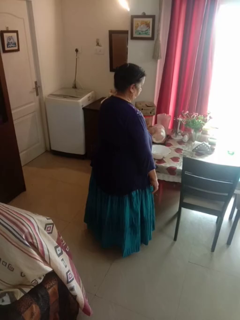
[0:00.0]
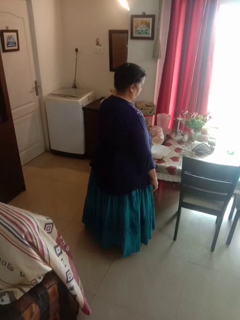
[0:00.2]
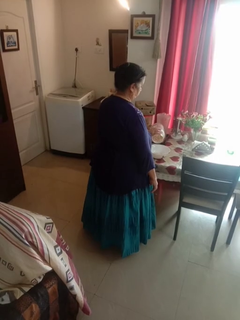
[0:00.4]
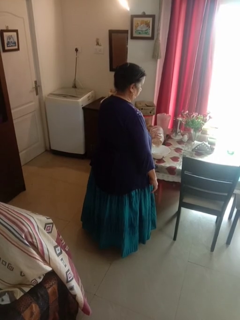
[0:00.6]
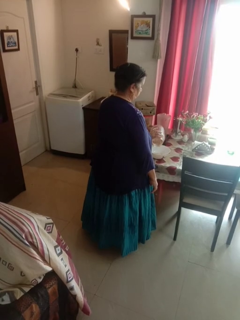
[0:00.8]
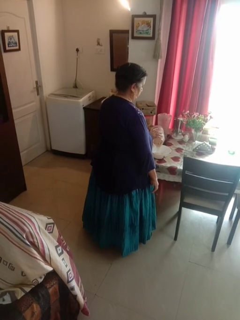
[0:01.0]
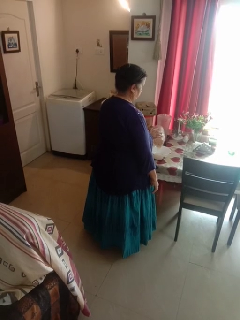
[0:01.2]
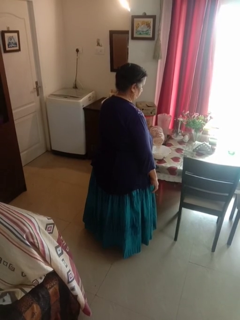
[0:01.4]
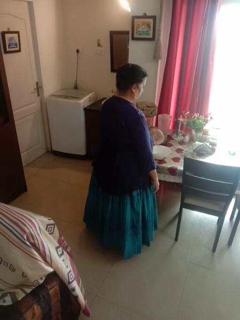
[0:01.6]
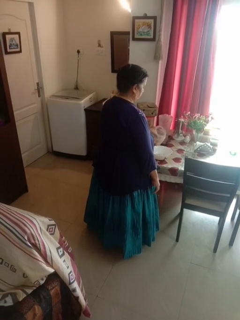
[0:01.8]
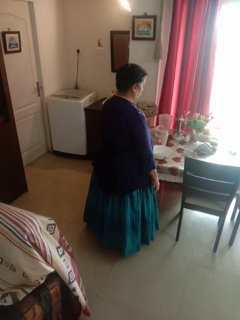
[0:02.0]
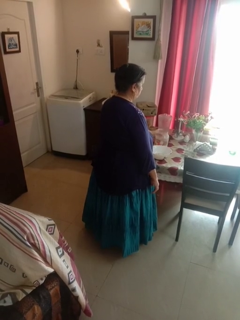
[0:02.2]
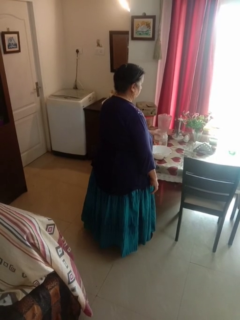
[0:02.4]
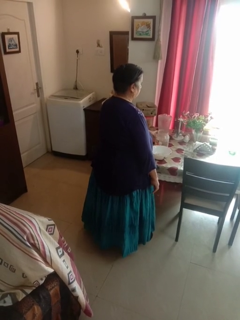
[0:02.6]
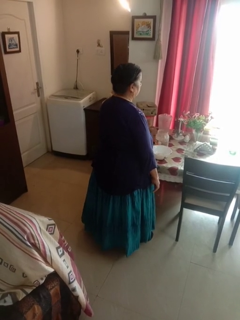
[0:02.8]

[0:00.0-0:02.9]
person pours into bowl

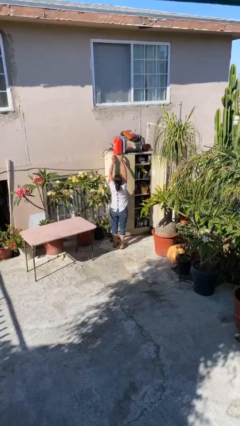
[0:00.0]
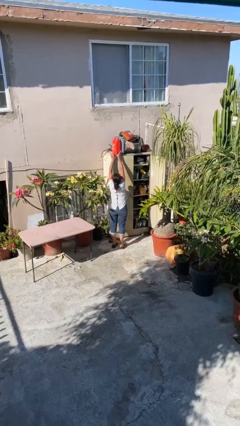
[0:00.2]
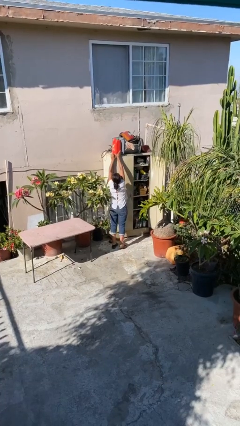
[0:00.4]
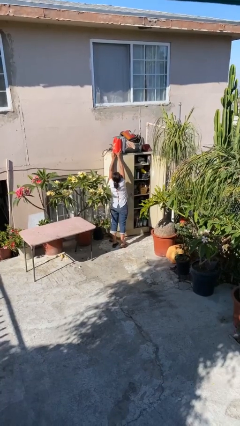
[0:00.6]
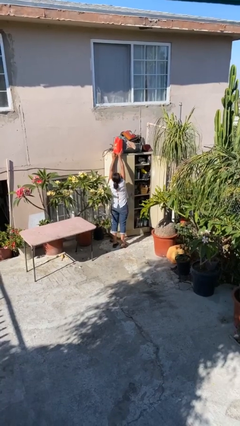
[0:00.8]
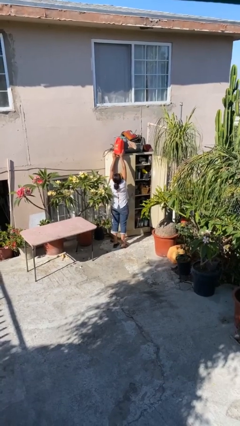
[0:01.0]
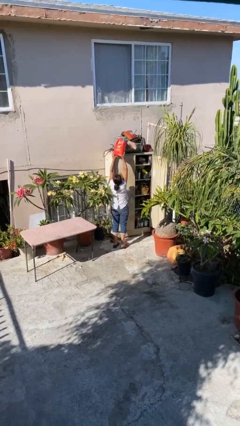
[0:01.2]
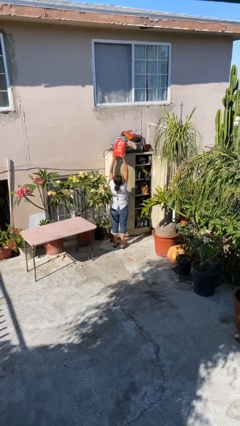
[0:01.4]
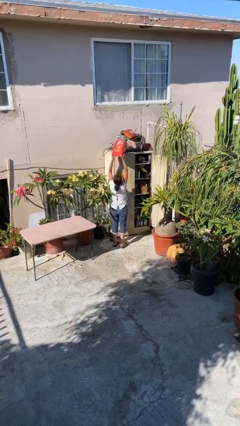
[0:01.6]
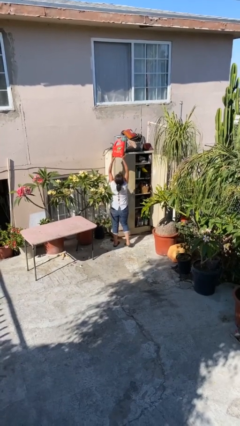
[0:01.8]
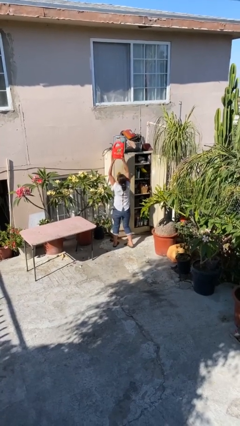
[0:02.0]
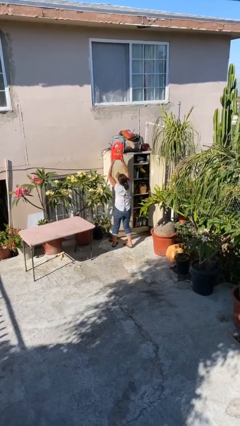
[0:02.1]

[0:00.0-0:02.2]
person picks up object from shelf

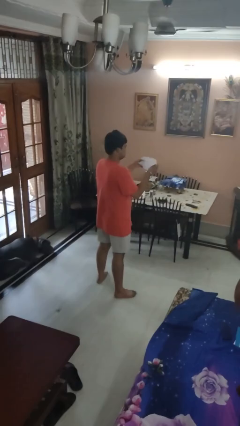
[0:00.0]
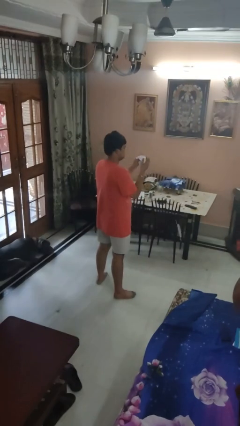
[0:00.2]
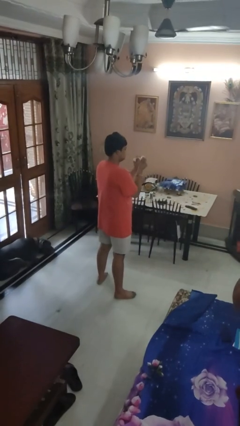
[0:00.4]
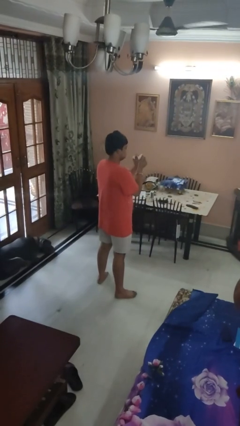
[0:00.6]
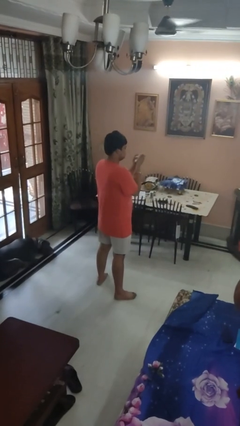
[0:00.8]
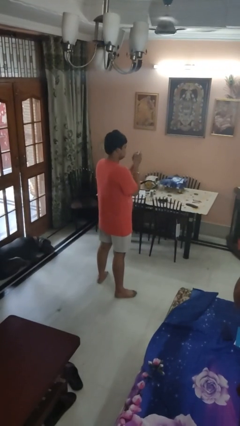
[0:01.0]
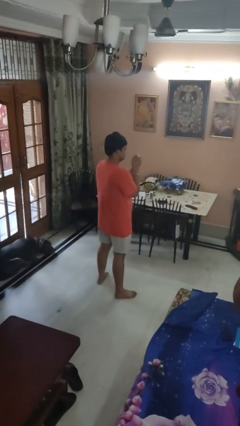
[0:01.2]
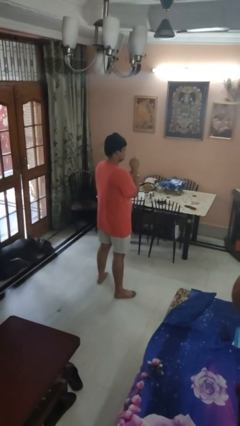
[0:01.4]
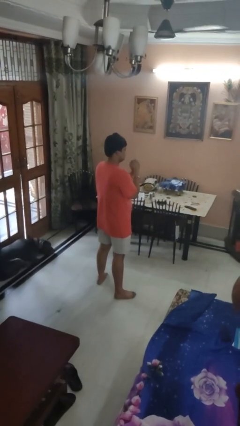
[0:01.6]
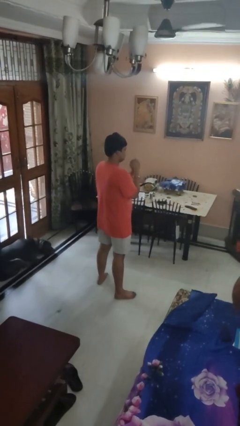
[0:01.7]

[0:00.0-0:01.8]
person crumples paper

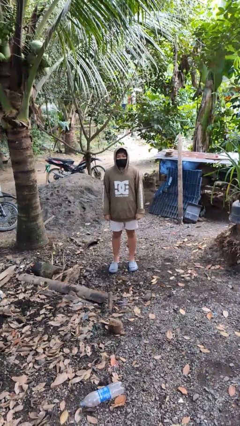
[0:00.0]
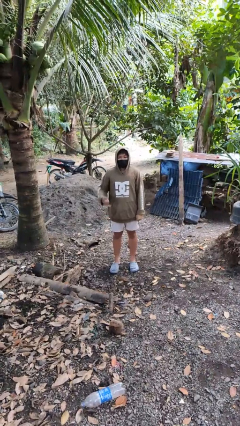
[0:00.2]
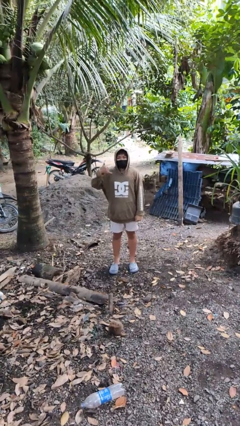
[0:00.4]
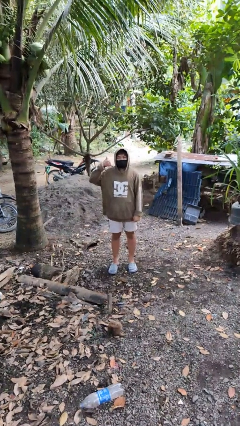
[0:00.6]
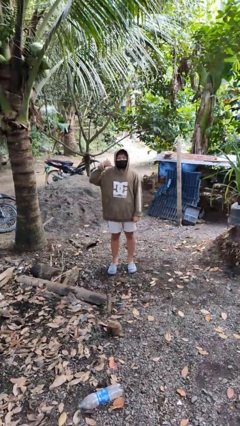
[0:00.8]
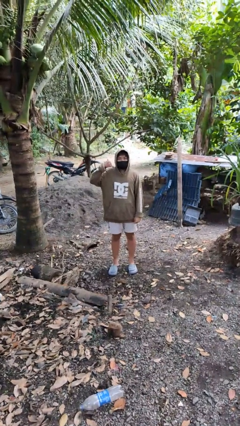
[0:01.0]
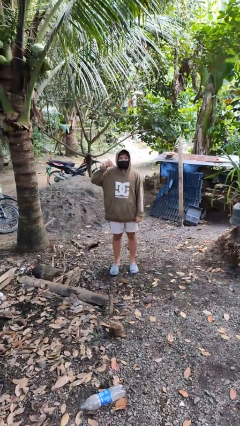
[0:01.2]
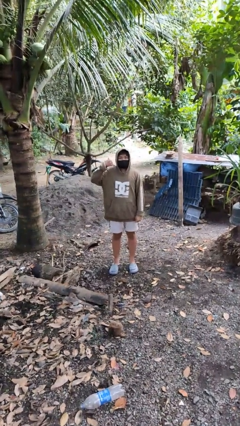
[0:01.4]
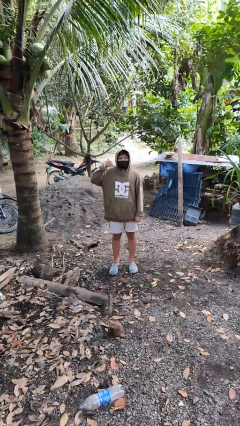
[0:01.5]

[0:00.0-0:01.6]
person gestures call me

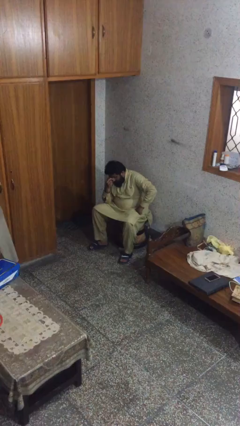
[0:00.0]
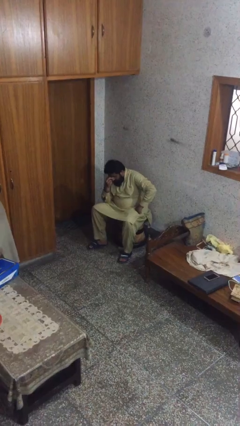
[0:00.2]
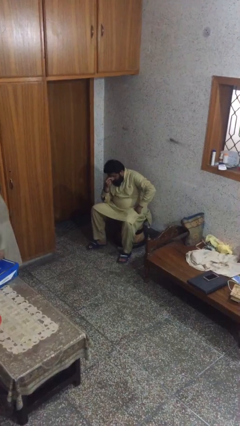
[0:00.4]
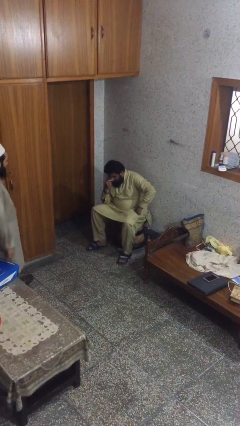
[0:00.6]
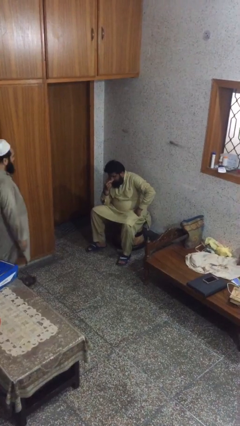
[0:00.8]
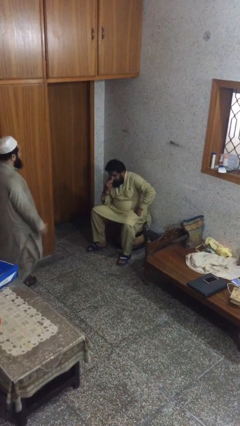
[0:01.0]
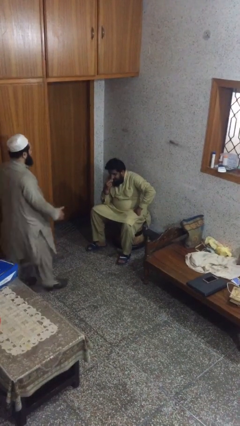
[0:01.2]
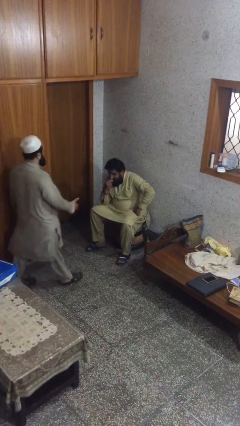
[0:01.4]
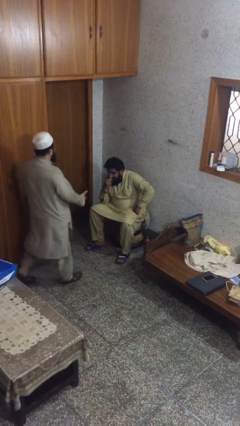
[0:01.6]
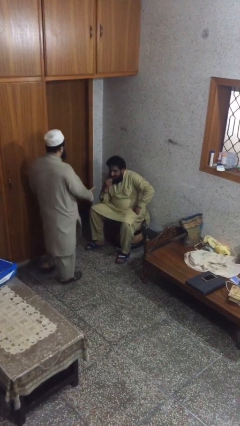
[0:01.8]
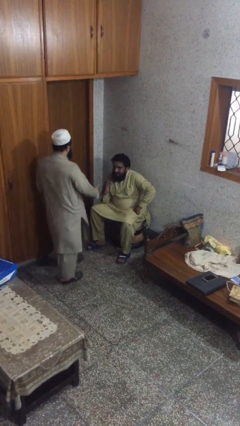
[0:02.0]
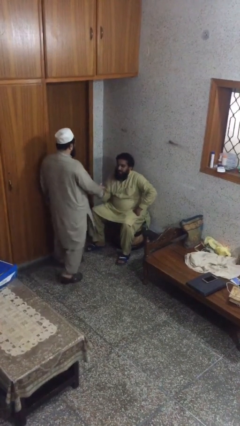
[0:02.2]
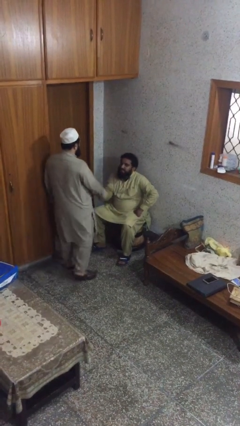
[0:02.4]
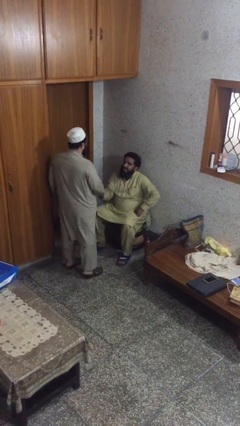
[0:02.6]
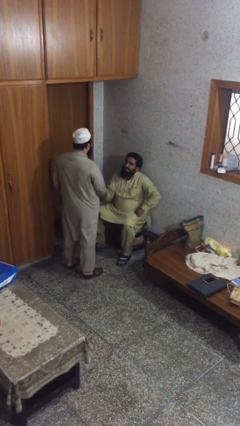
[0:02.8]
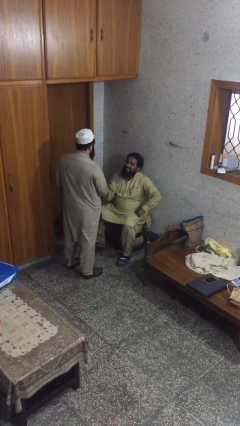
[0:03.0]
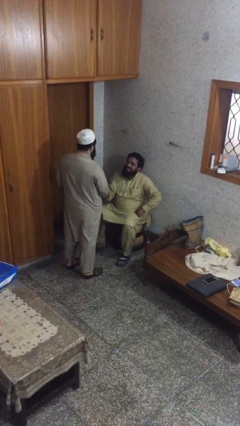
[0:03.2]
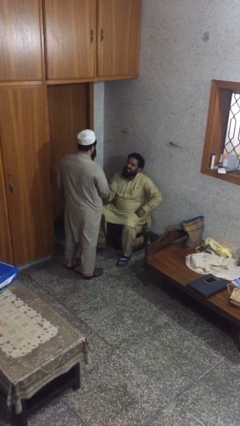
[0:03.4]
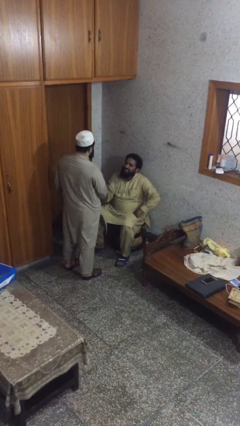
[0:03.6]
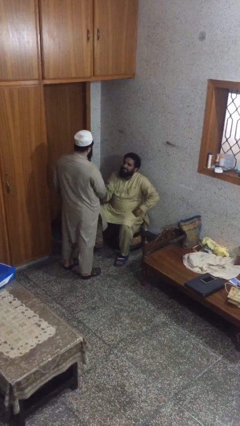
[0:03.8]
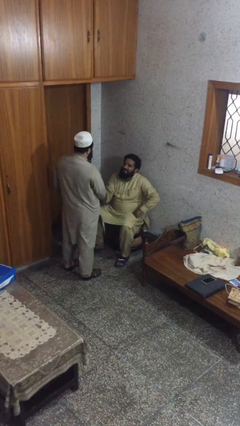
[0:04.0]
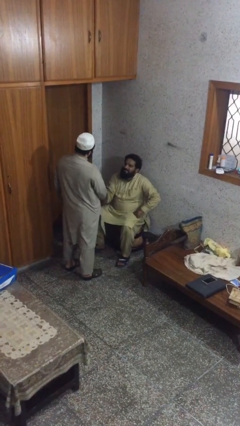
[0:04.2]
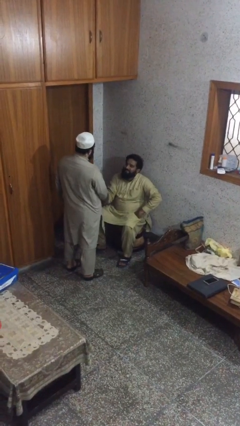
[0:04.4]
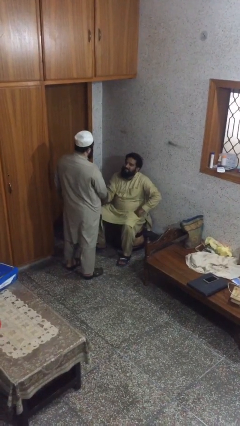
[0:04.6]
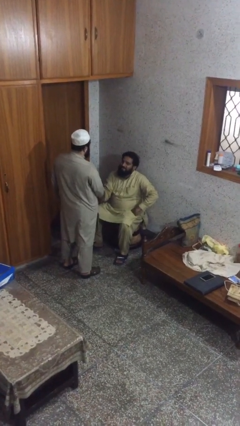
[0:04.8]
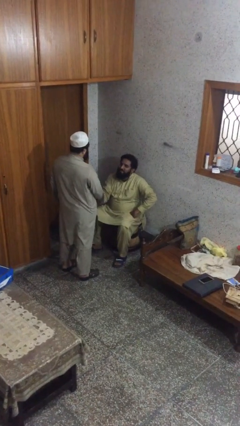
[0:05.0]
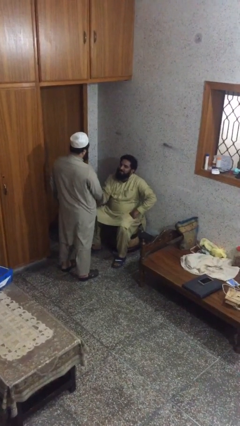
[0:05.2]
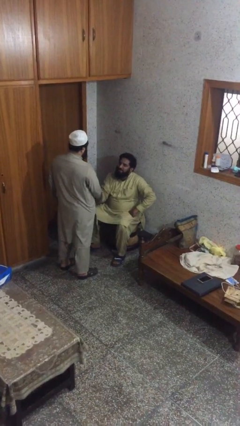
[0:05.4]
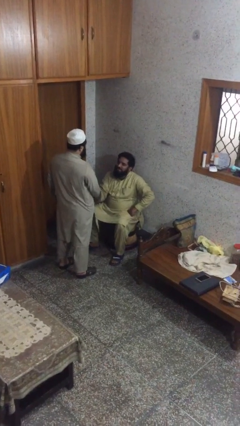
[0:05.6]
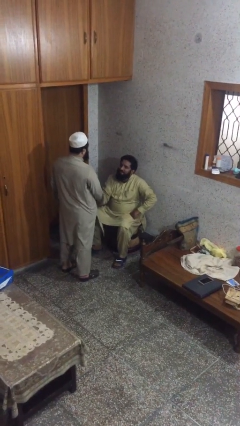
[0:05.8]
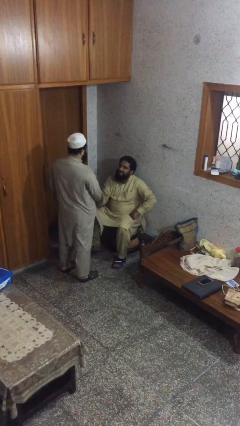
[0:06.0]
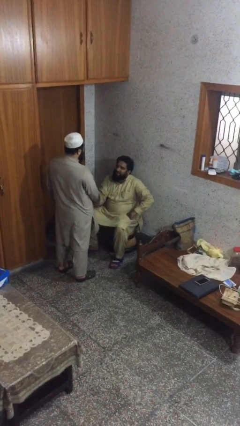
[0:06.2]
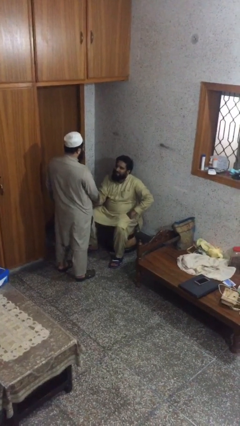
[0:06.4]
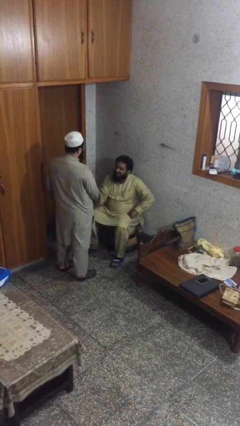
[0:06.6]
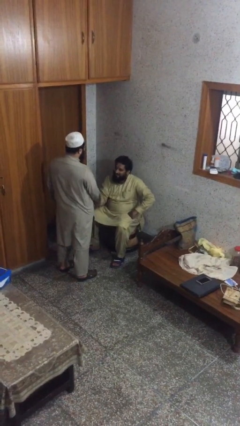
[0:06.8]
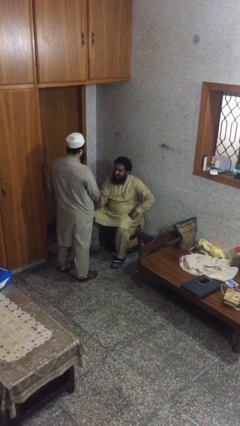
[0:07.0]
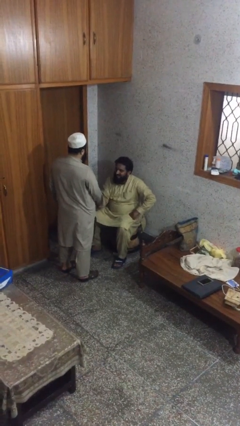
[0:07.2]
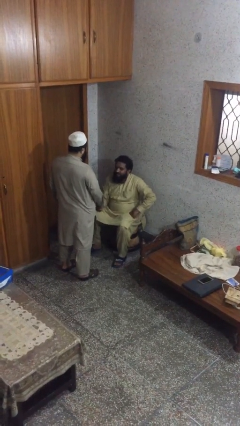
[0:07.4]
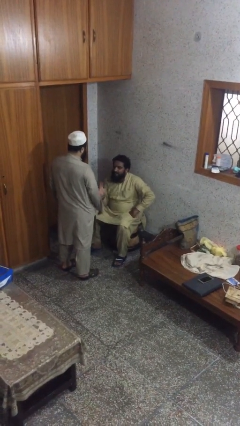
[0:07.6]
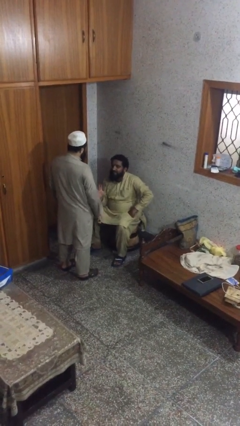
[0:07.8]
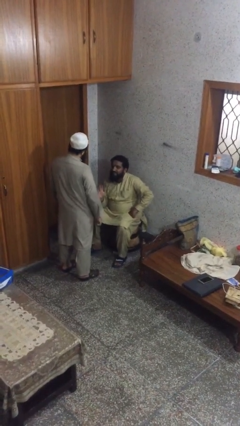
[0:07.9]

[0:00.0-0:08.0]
person shakes hand

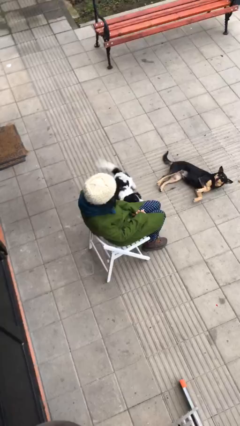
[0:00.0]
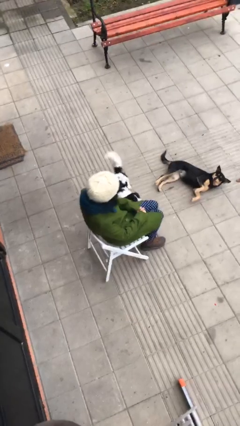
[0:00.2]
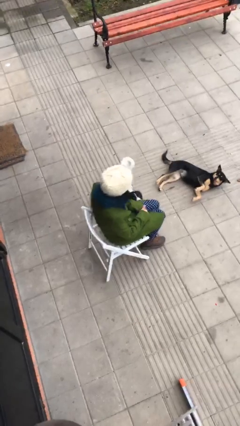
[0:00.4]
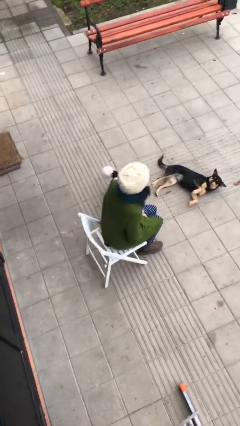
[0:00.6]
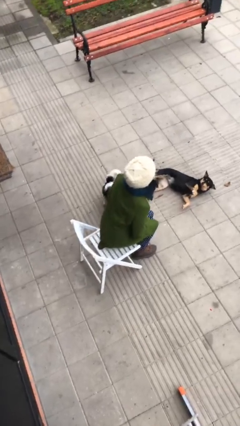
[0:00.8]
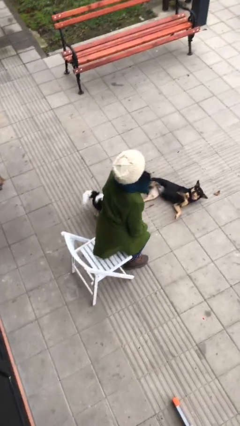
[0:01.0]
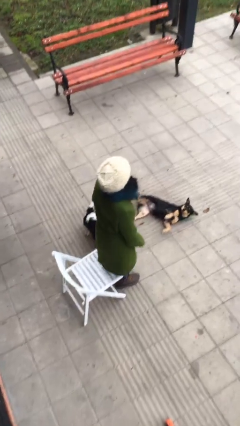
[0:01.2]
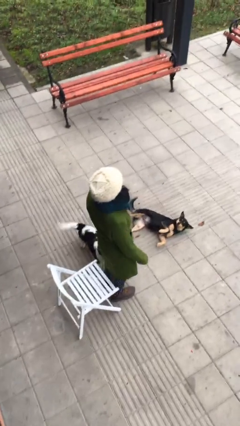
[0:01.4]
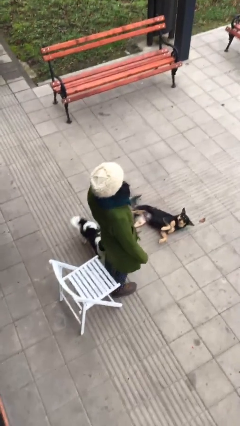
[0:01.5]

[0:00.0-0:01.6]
person stands up
